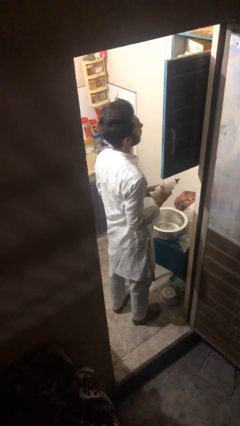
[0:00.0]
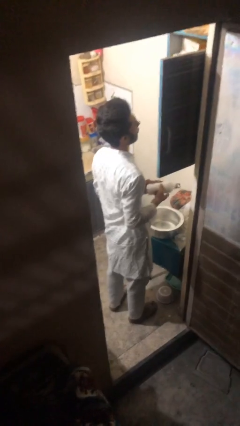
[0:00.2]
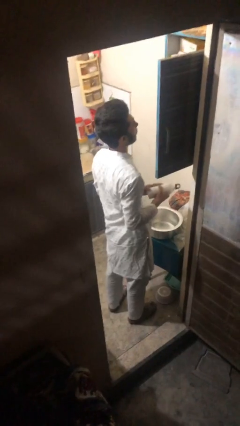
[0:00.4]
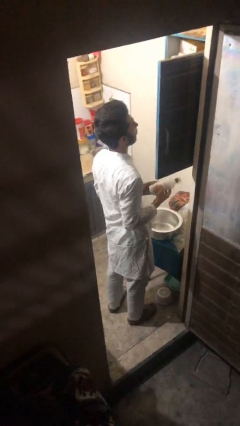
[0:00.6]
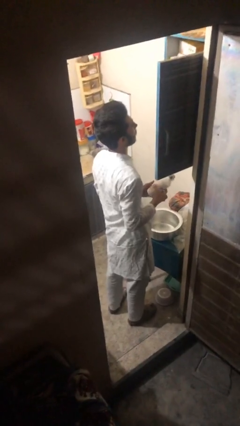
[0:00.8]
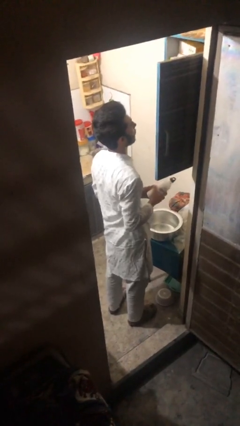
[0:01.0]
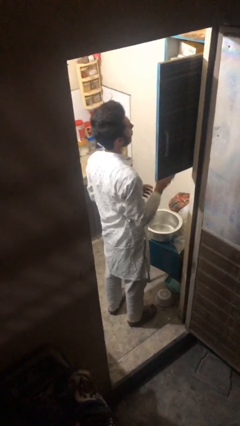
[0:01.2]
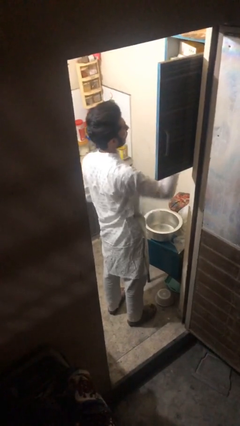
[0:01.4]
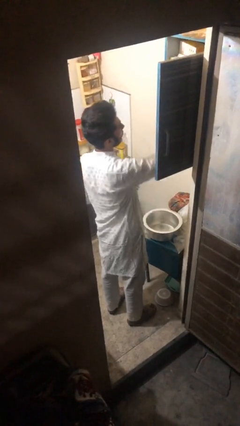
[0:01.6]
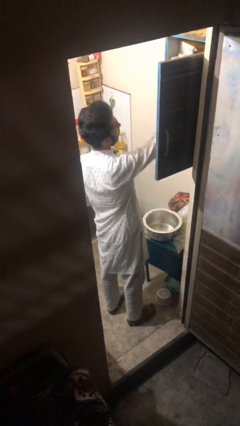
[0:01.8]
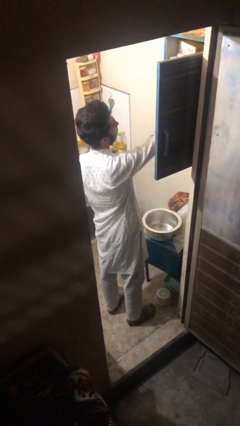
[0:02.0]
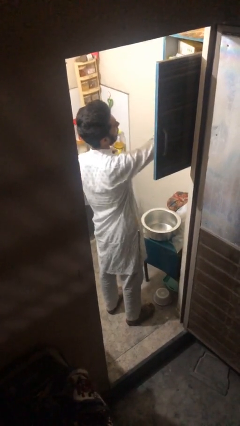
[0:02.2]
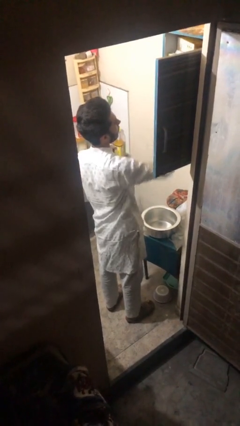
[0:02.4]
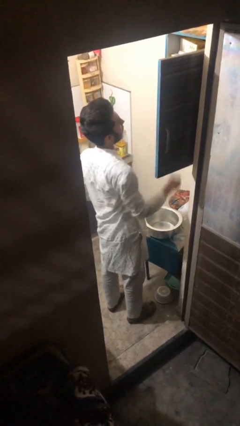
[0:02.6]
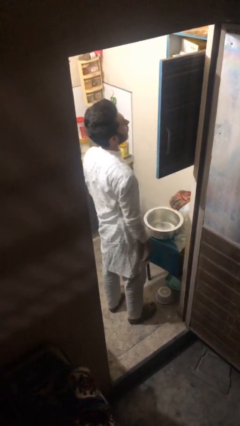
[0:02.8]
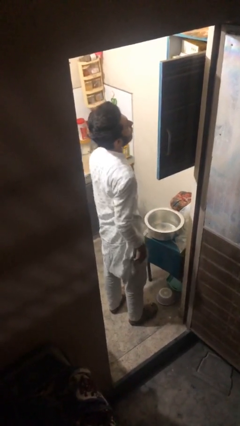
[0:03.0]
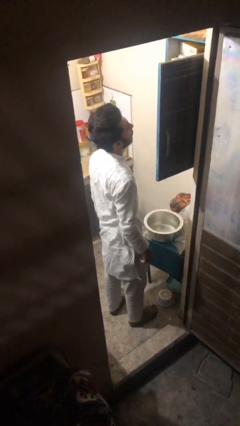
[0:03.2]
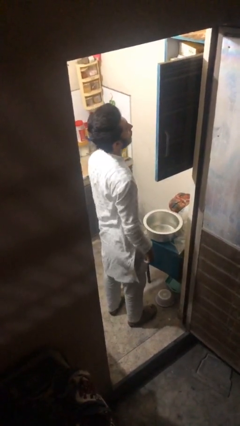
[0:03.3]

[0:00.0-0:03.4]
person puts object in cabinet

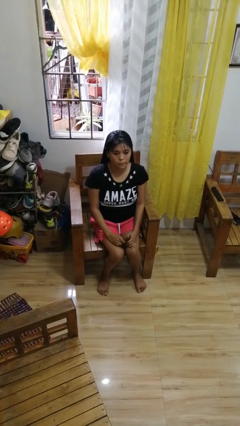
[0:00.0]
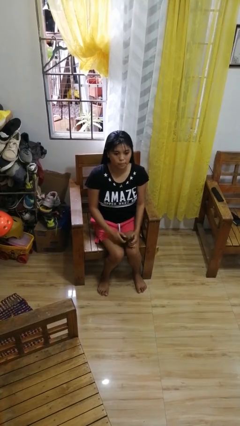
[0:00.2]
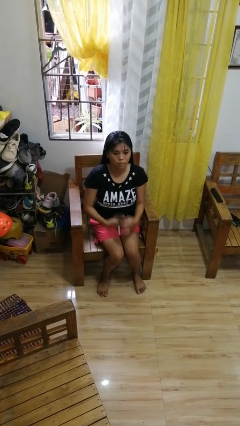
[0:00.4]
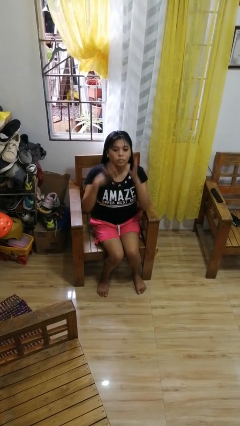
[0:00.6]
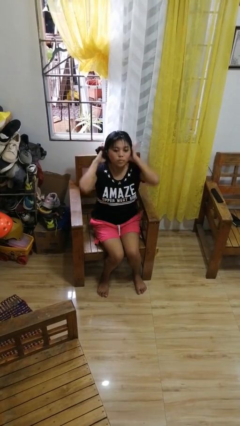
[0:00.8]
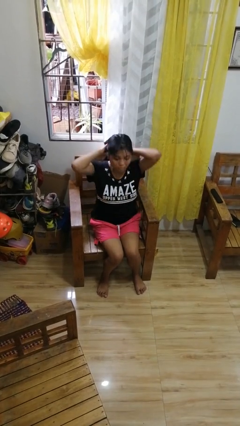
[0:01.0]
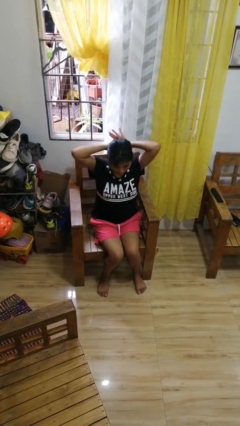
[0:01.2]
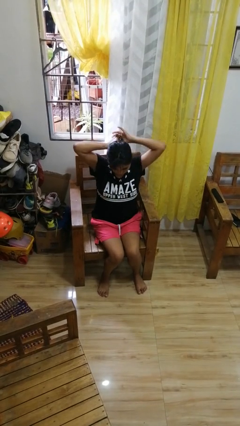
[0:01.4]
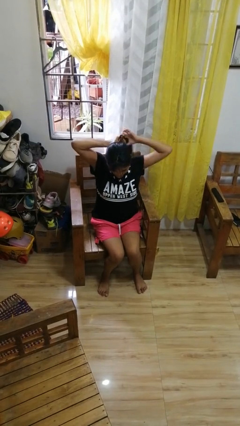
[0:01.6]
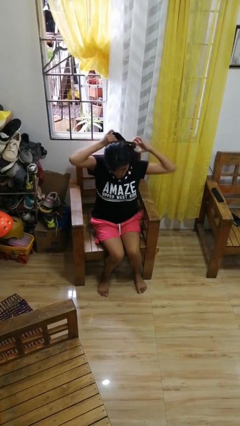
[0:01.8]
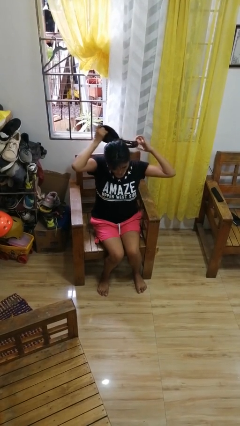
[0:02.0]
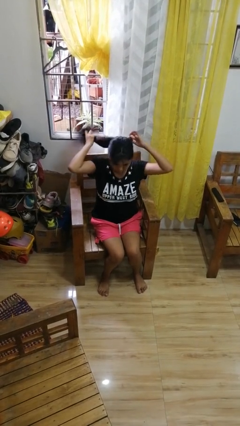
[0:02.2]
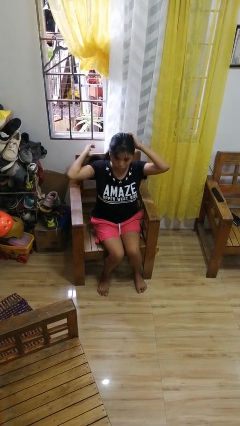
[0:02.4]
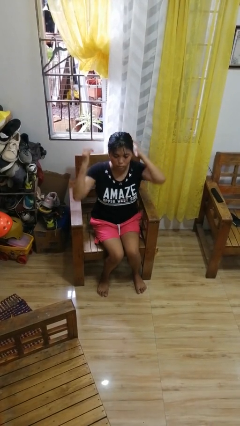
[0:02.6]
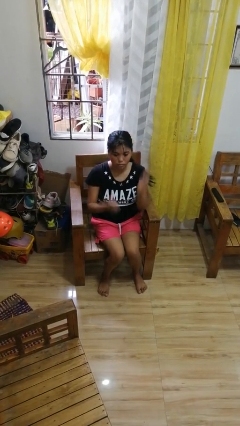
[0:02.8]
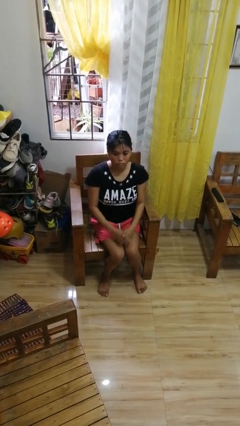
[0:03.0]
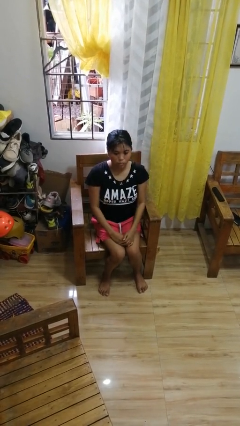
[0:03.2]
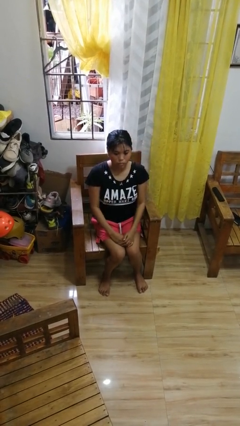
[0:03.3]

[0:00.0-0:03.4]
person puts hair in ponytail

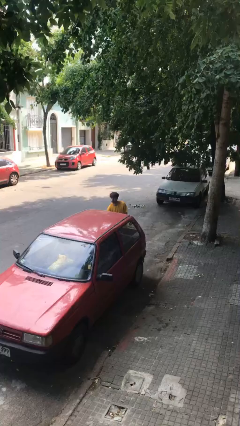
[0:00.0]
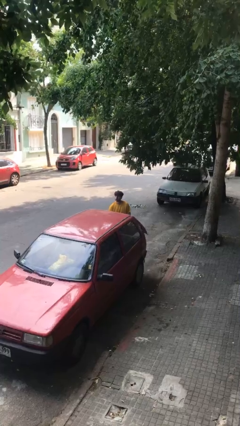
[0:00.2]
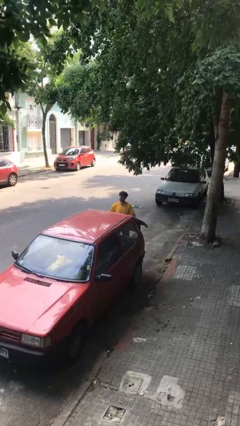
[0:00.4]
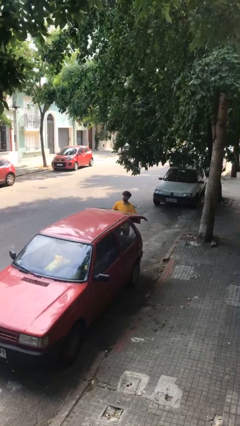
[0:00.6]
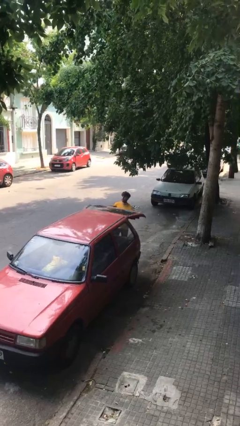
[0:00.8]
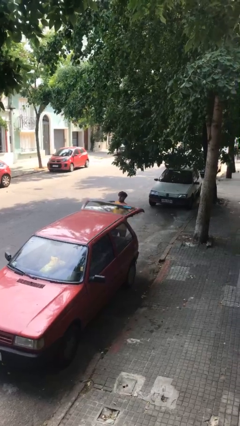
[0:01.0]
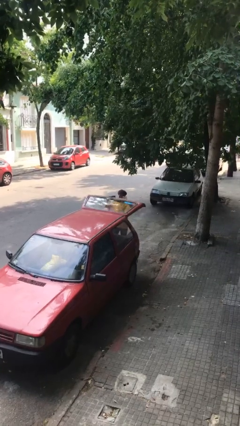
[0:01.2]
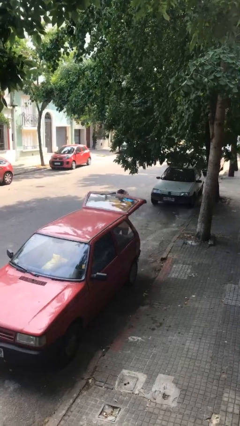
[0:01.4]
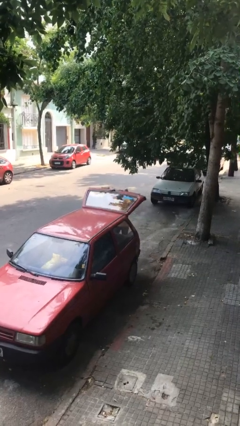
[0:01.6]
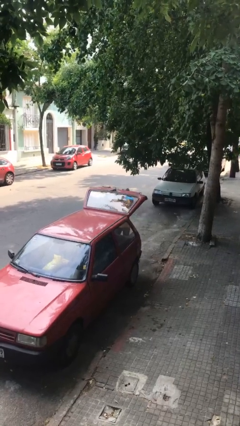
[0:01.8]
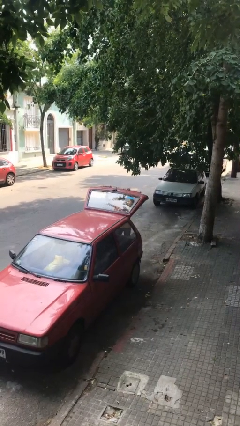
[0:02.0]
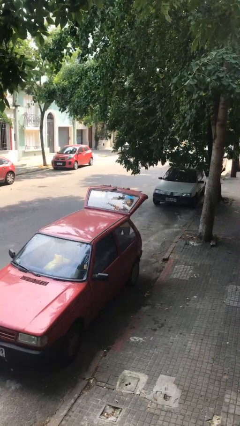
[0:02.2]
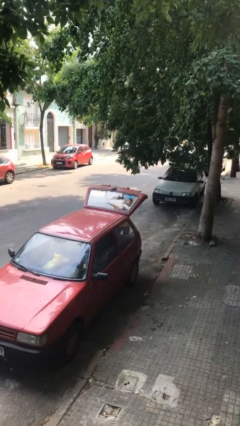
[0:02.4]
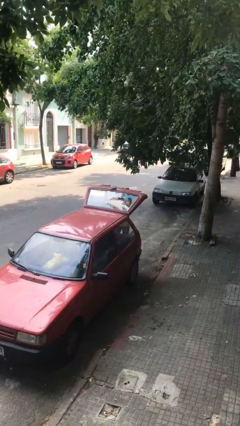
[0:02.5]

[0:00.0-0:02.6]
person opens car trunk

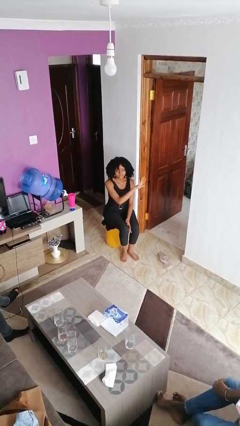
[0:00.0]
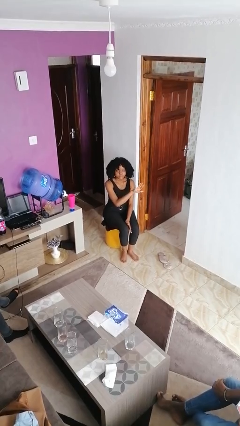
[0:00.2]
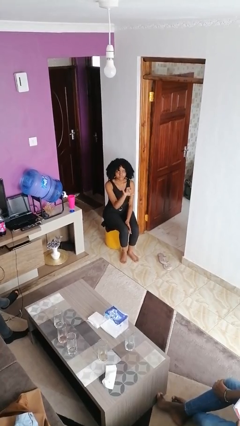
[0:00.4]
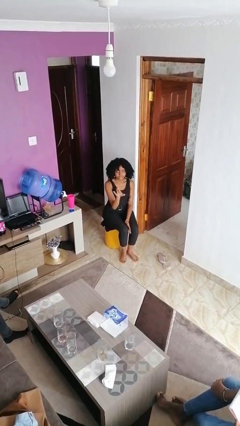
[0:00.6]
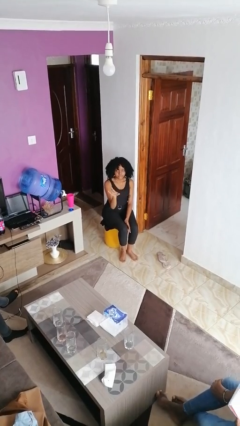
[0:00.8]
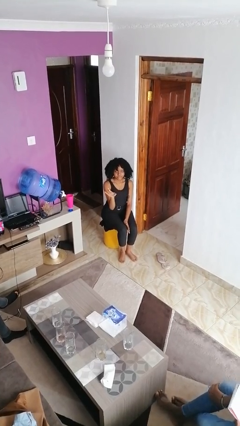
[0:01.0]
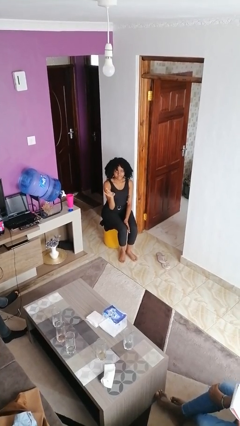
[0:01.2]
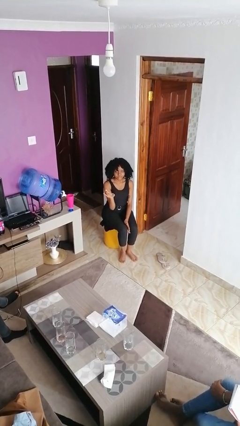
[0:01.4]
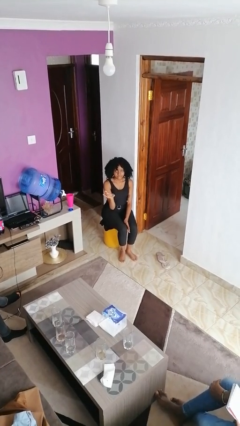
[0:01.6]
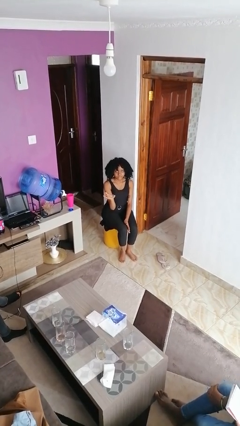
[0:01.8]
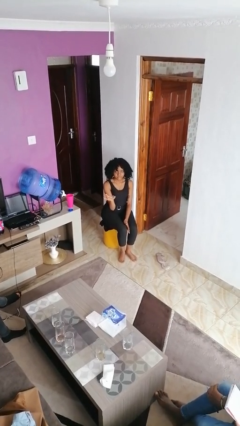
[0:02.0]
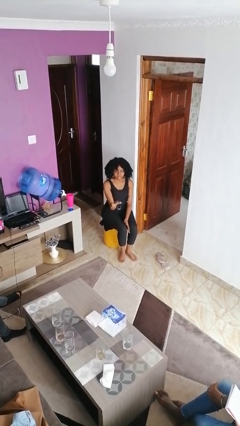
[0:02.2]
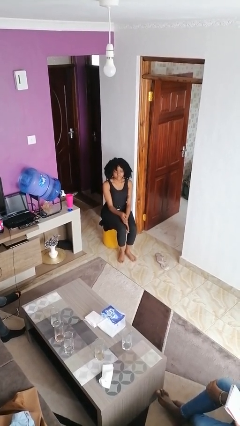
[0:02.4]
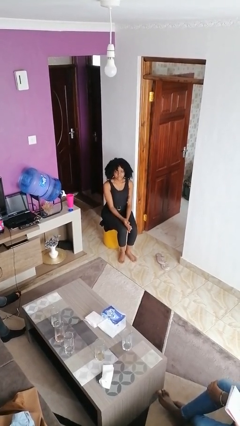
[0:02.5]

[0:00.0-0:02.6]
person gestures swipe right

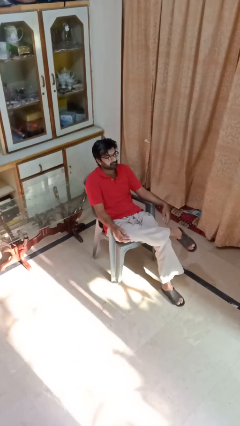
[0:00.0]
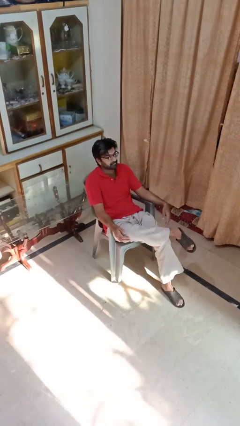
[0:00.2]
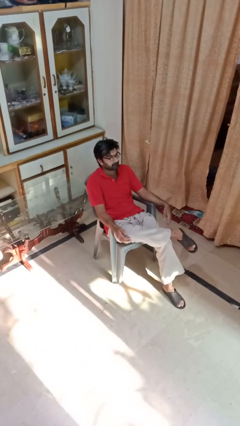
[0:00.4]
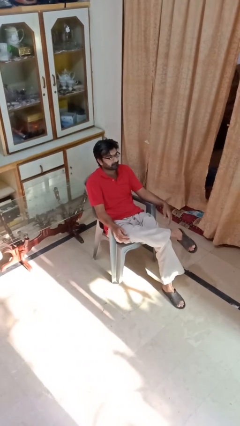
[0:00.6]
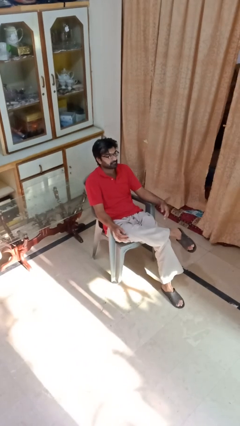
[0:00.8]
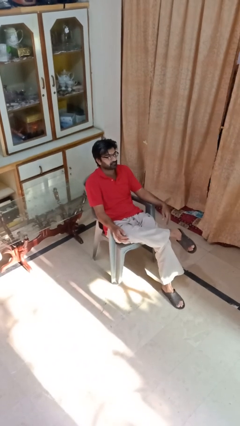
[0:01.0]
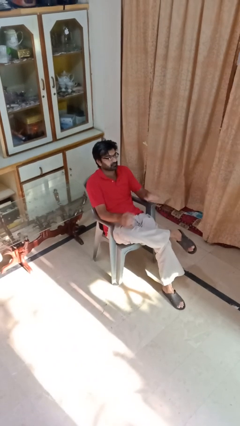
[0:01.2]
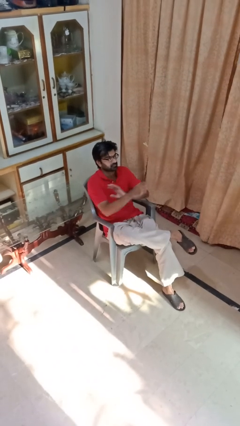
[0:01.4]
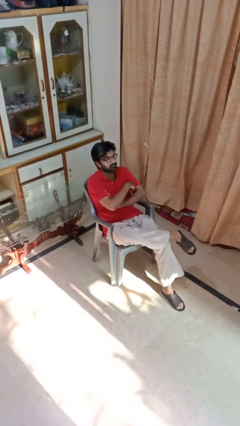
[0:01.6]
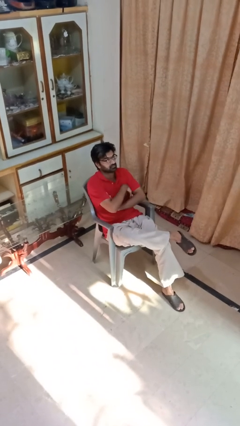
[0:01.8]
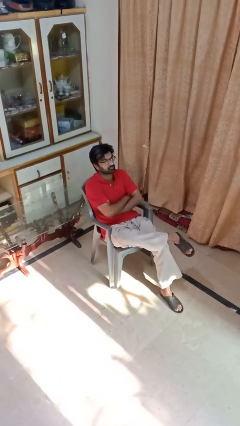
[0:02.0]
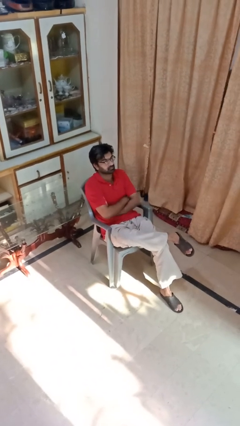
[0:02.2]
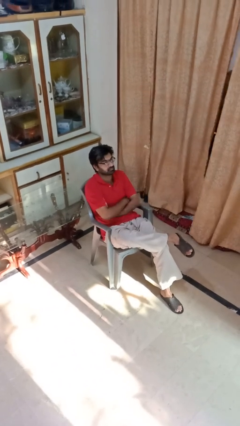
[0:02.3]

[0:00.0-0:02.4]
person crosses arms

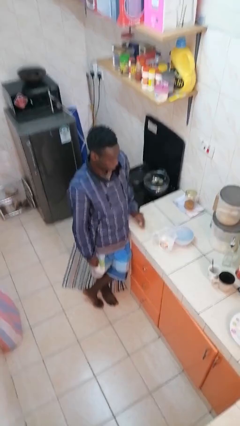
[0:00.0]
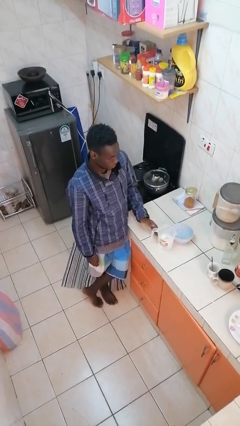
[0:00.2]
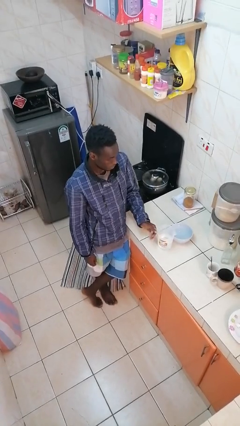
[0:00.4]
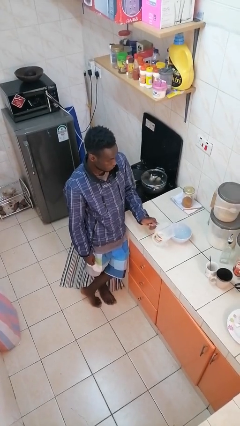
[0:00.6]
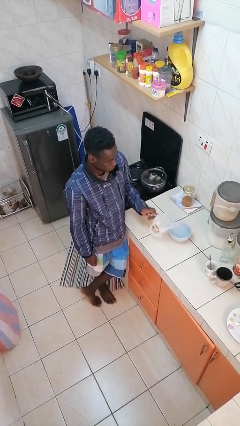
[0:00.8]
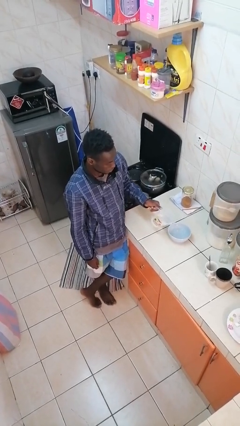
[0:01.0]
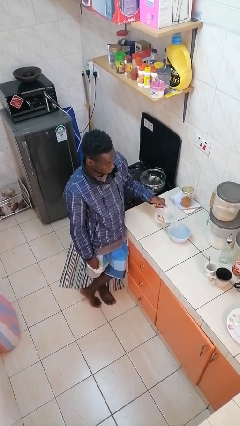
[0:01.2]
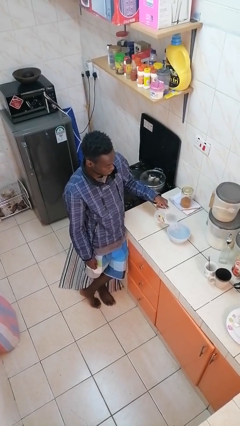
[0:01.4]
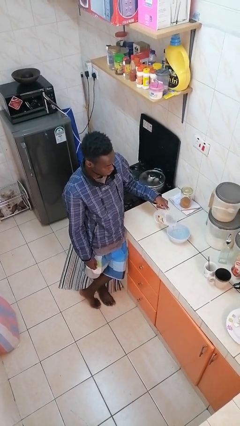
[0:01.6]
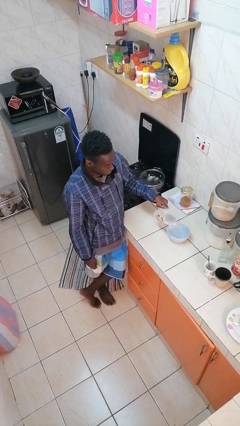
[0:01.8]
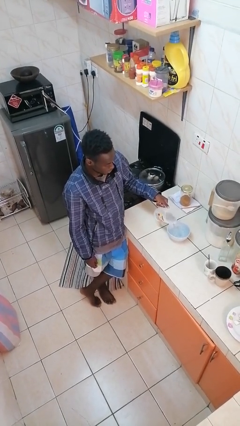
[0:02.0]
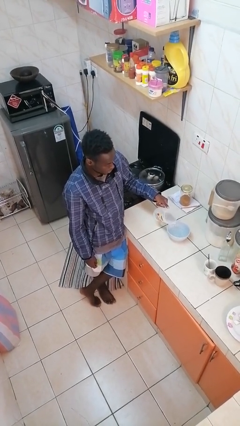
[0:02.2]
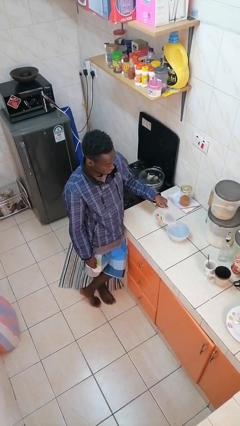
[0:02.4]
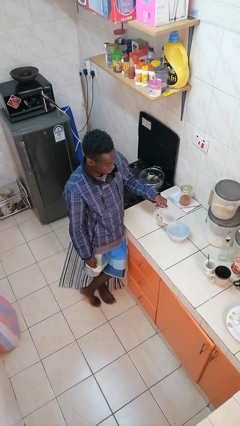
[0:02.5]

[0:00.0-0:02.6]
person pours into bowl
